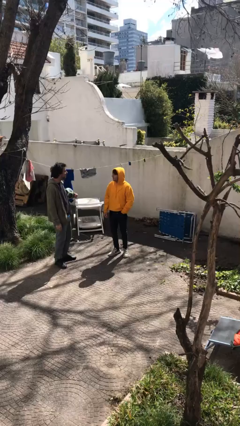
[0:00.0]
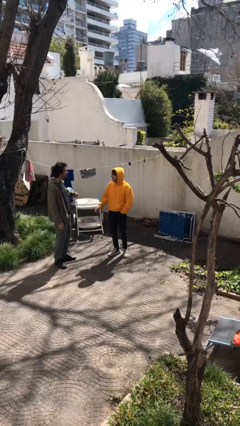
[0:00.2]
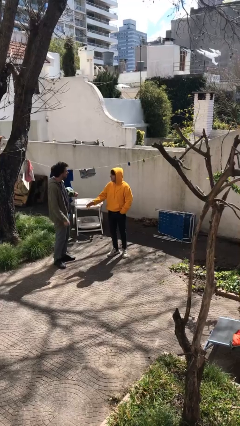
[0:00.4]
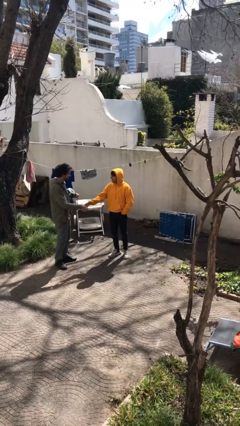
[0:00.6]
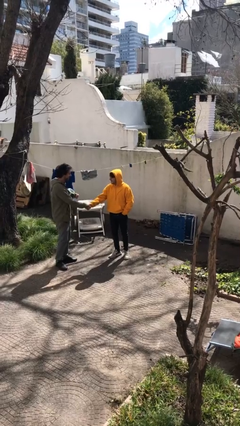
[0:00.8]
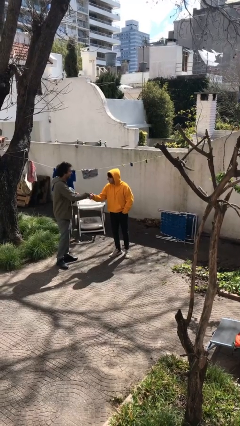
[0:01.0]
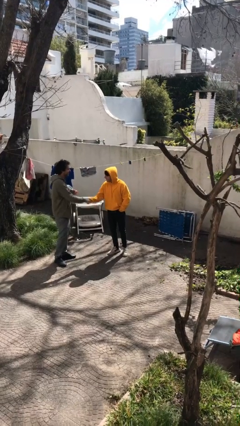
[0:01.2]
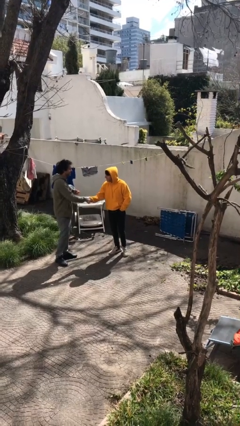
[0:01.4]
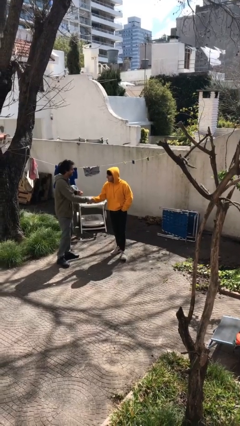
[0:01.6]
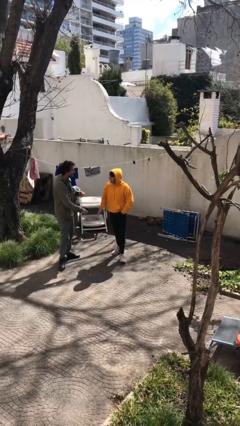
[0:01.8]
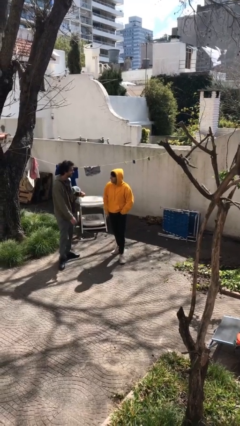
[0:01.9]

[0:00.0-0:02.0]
person shakes hand

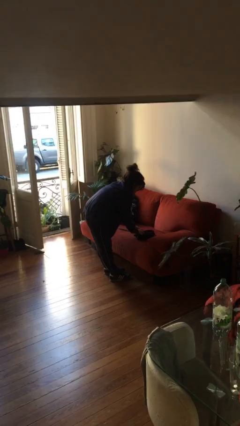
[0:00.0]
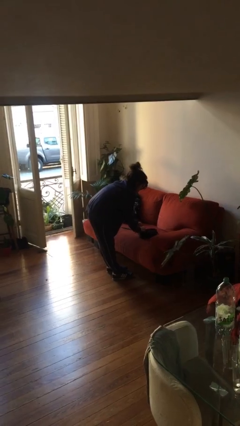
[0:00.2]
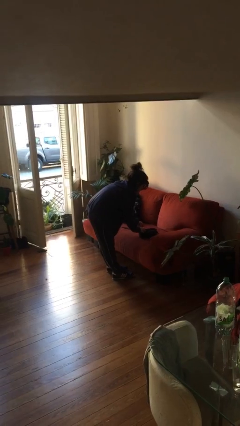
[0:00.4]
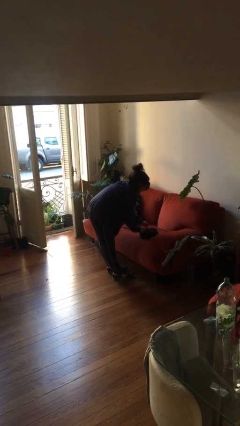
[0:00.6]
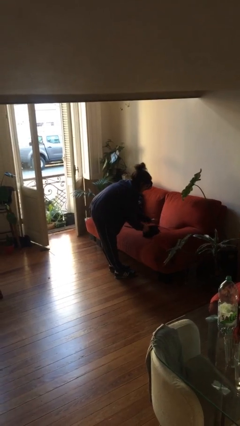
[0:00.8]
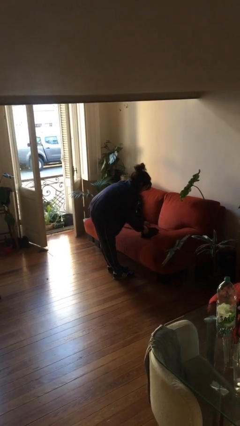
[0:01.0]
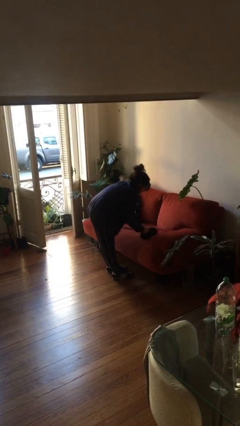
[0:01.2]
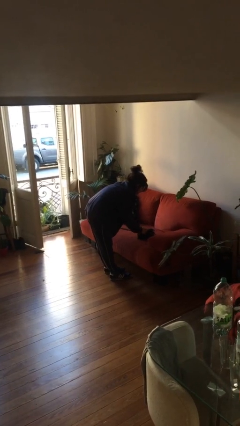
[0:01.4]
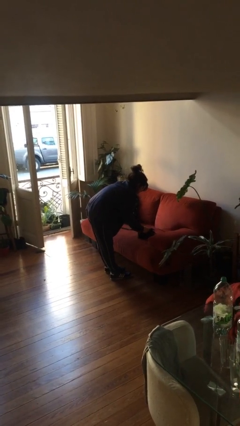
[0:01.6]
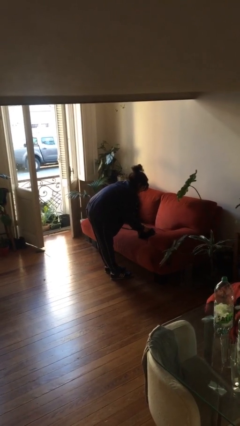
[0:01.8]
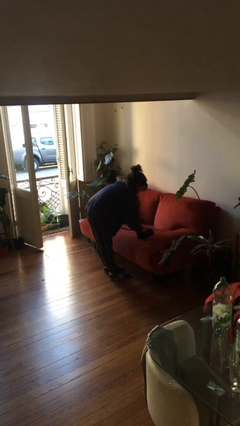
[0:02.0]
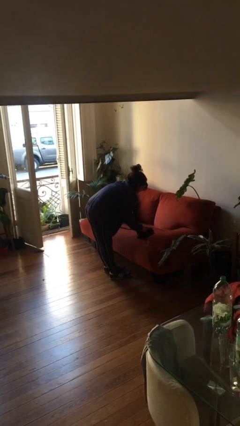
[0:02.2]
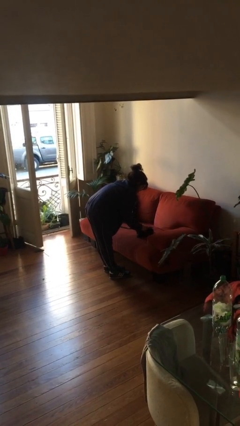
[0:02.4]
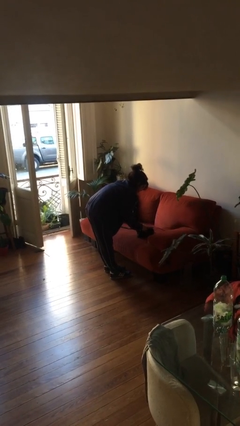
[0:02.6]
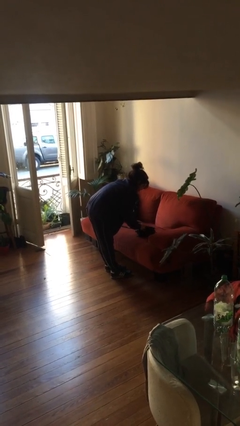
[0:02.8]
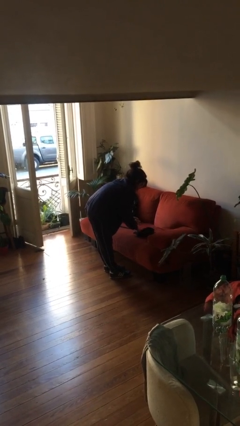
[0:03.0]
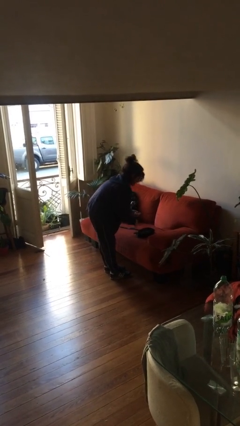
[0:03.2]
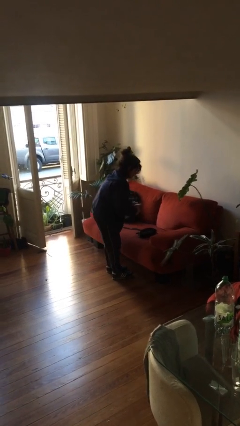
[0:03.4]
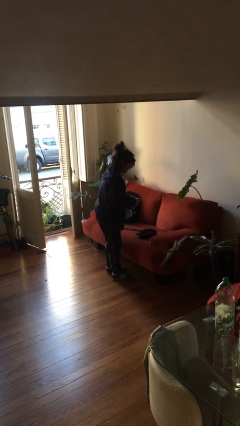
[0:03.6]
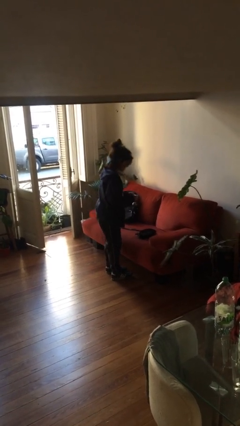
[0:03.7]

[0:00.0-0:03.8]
person searches in purse

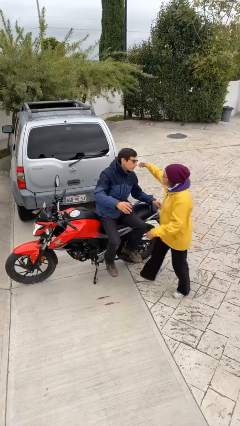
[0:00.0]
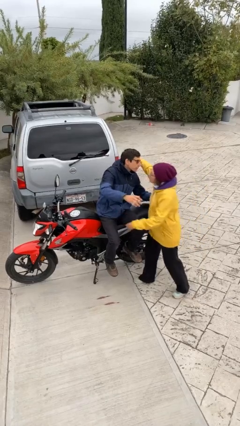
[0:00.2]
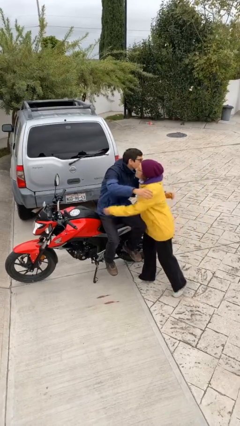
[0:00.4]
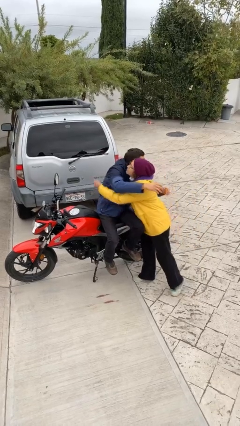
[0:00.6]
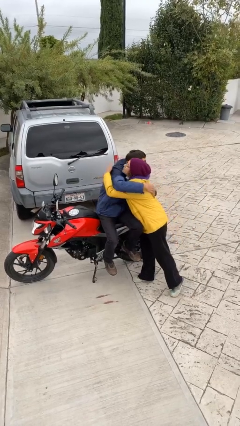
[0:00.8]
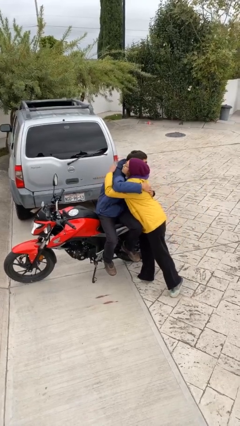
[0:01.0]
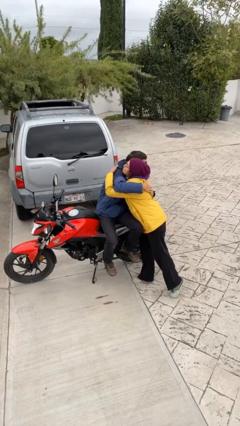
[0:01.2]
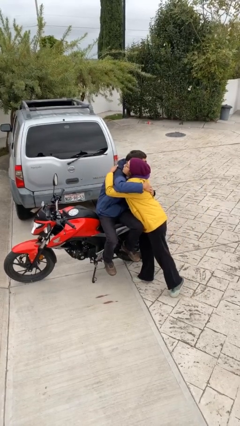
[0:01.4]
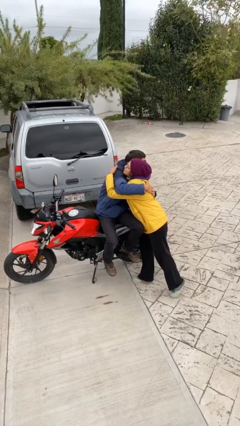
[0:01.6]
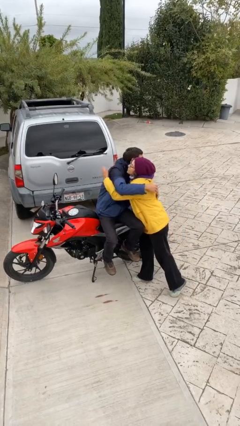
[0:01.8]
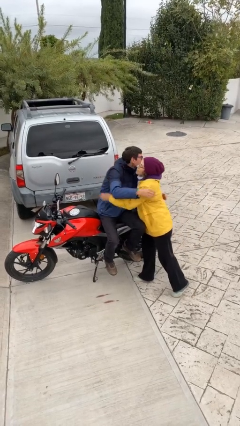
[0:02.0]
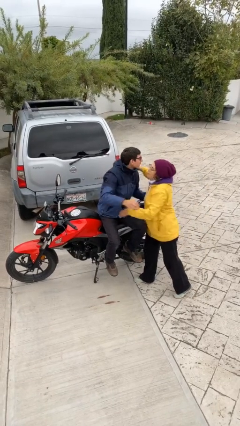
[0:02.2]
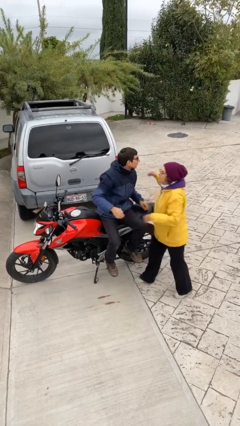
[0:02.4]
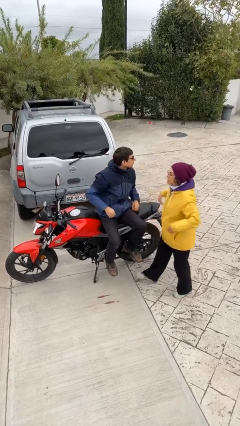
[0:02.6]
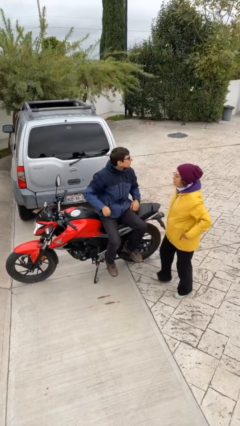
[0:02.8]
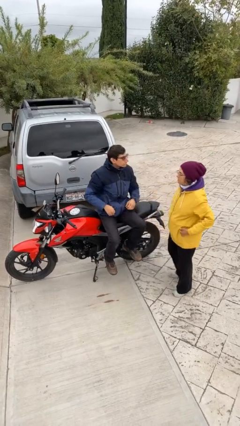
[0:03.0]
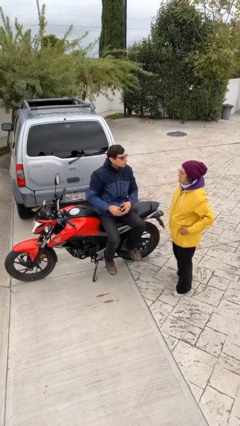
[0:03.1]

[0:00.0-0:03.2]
person embraces person

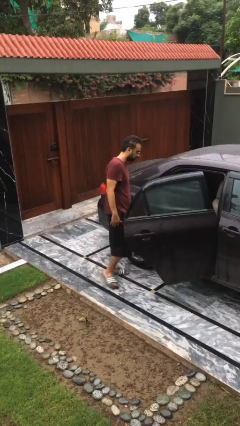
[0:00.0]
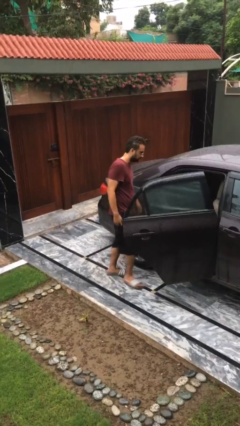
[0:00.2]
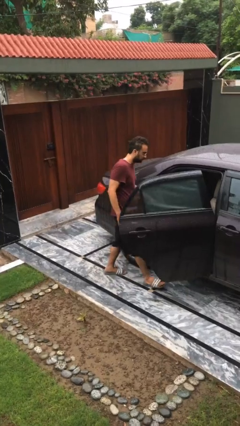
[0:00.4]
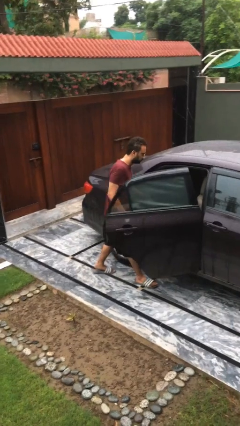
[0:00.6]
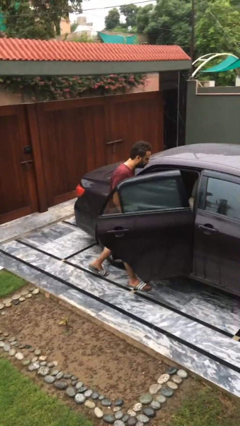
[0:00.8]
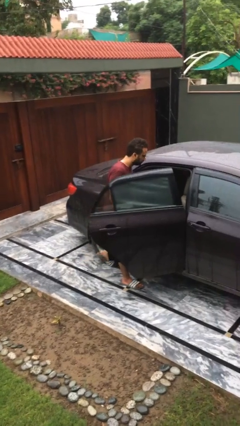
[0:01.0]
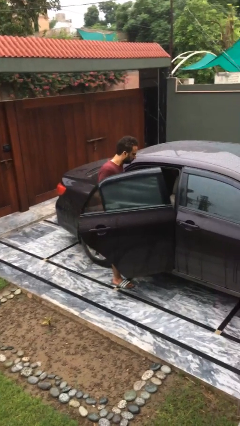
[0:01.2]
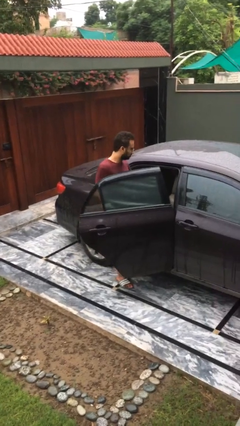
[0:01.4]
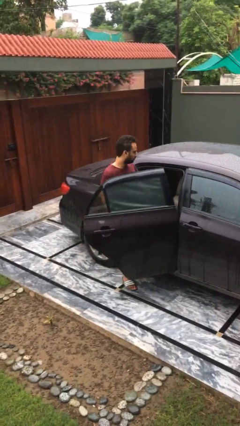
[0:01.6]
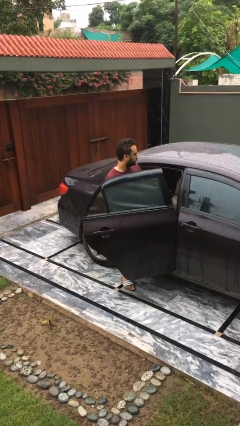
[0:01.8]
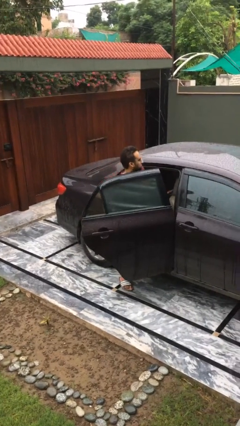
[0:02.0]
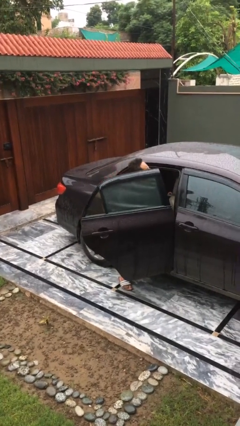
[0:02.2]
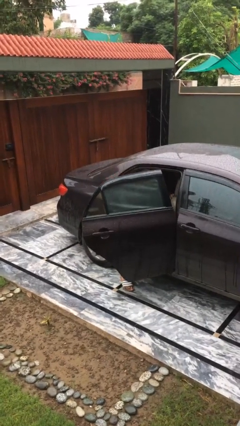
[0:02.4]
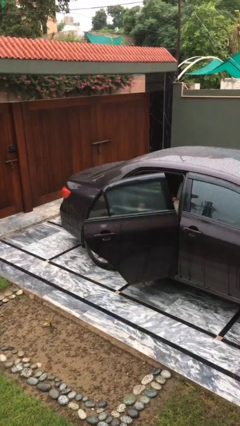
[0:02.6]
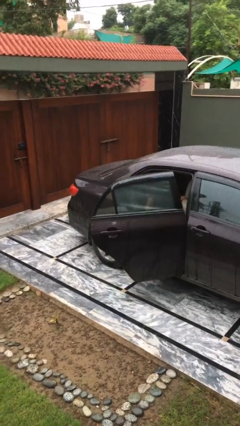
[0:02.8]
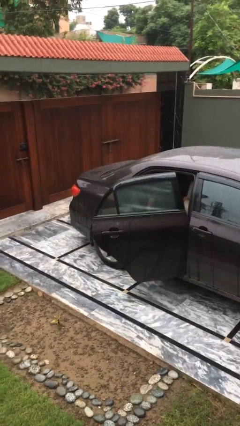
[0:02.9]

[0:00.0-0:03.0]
person enters car

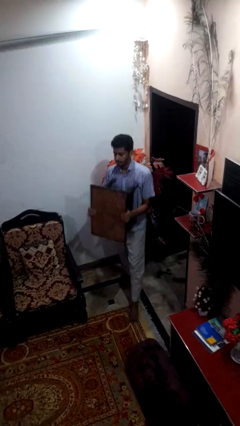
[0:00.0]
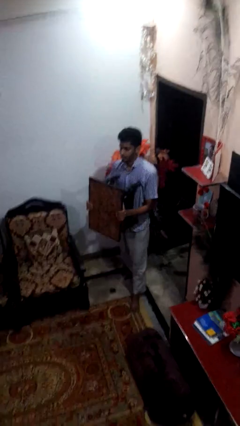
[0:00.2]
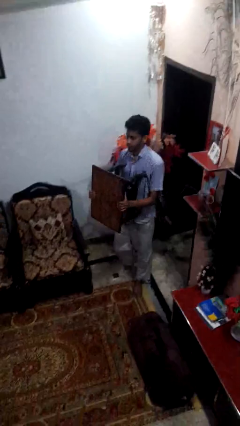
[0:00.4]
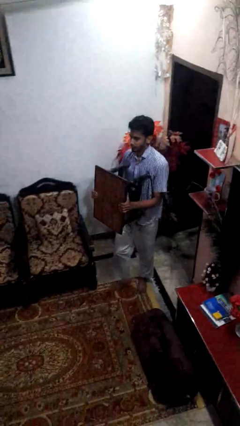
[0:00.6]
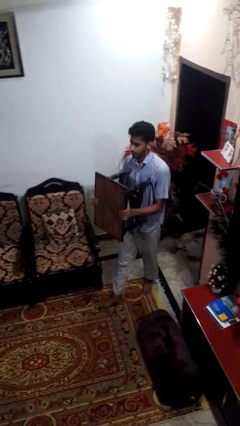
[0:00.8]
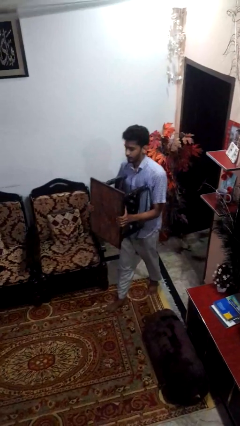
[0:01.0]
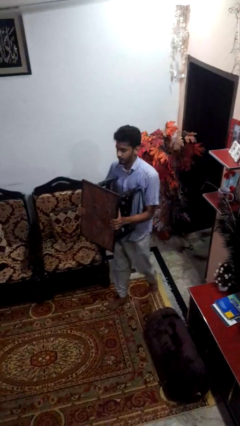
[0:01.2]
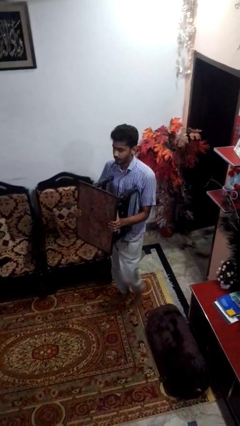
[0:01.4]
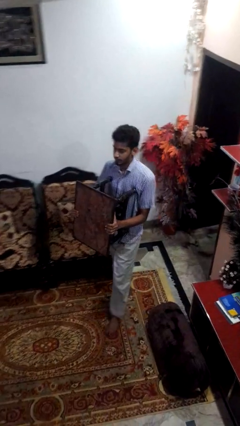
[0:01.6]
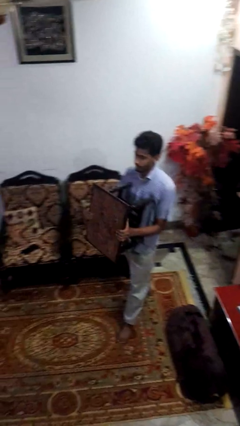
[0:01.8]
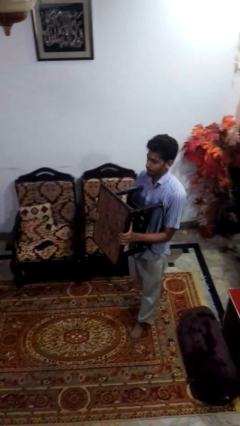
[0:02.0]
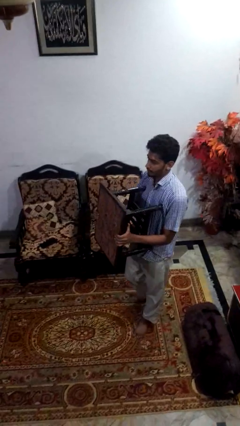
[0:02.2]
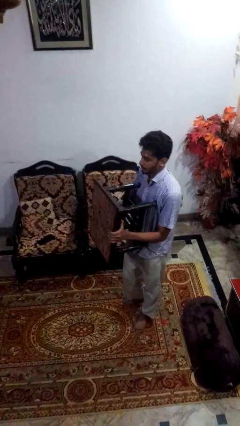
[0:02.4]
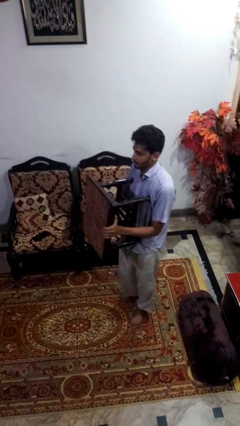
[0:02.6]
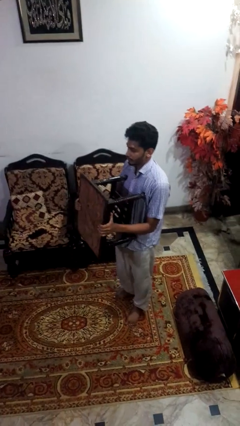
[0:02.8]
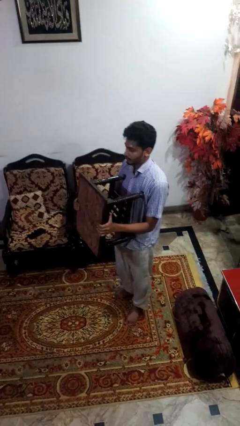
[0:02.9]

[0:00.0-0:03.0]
person carries furniture

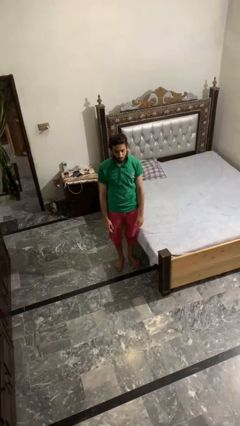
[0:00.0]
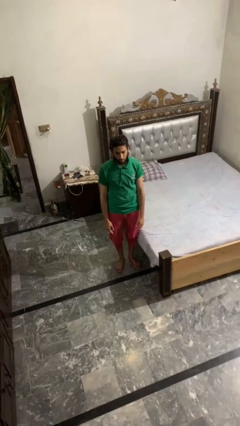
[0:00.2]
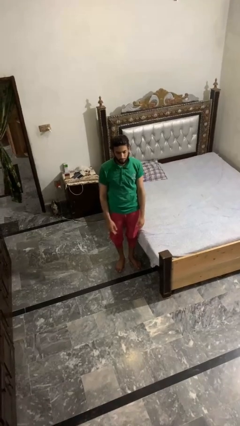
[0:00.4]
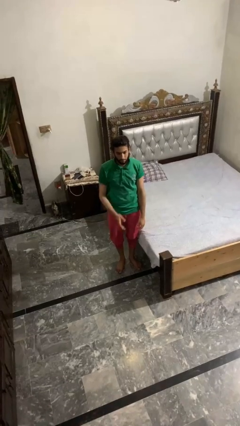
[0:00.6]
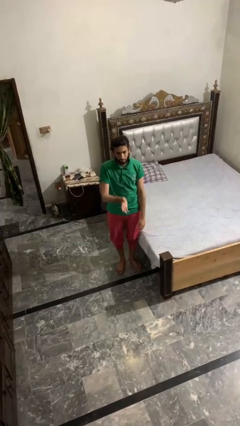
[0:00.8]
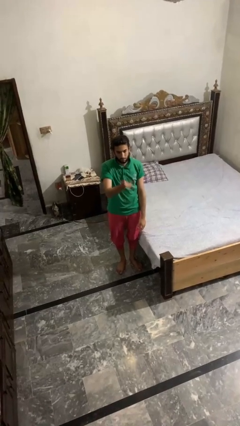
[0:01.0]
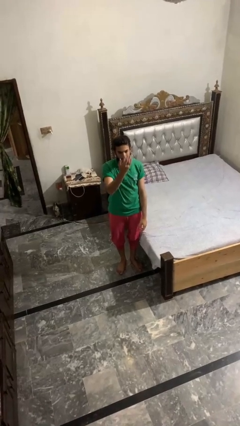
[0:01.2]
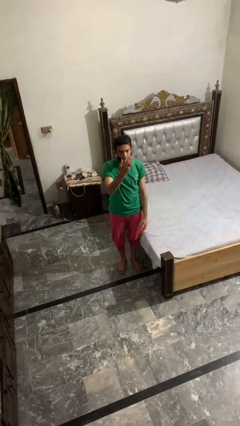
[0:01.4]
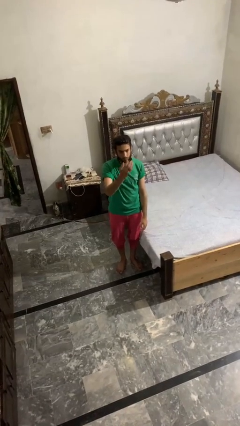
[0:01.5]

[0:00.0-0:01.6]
person gestures swipe up

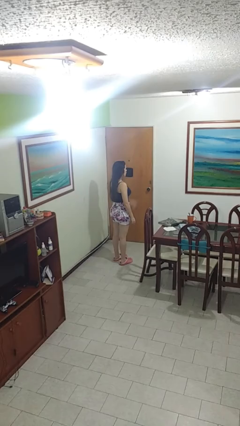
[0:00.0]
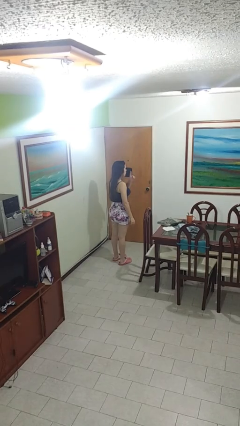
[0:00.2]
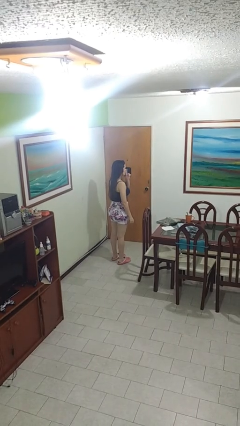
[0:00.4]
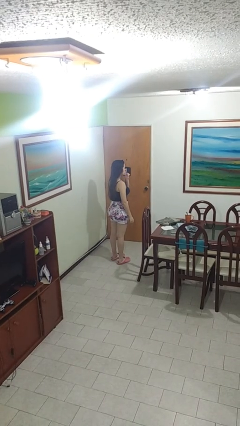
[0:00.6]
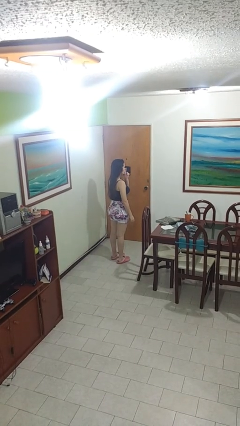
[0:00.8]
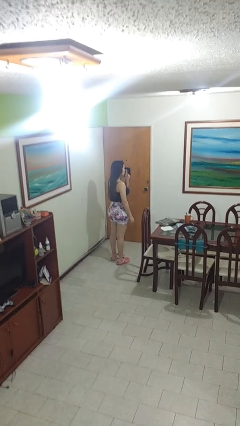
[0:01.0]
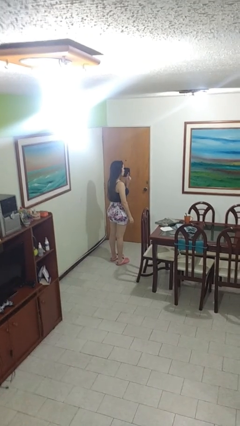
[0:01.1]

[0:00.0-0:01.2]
person gestures be quiet
